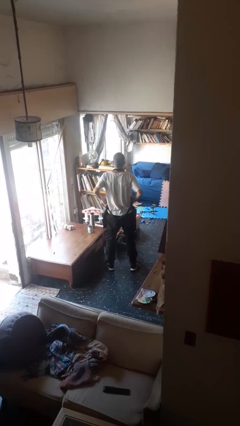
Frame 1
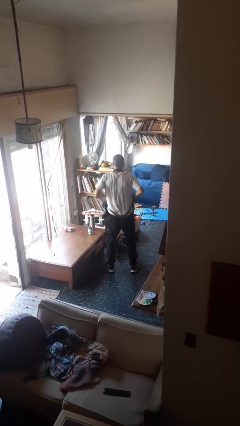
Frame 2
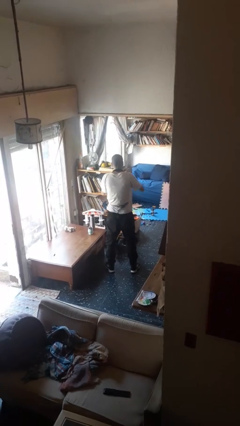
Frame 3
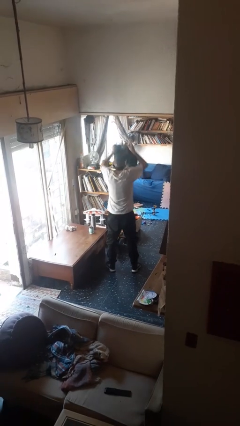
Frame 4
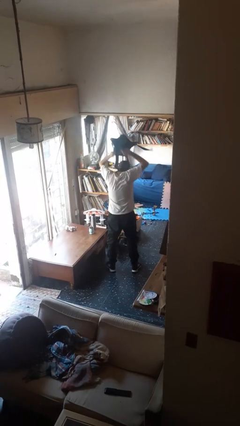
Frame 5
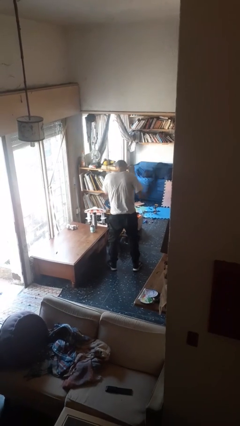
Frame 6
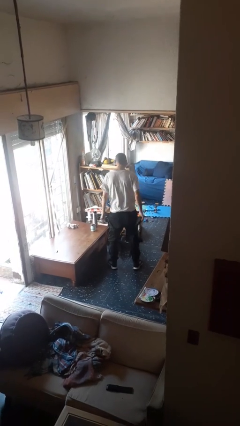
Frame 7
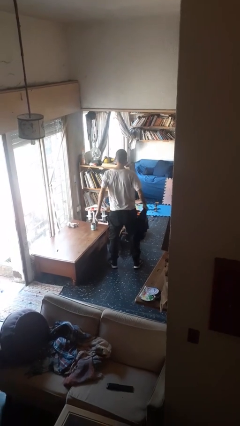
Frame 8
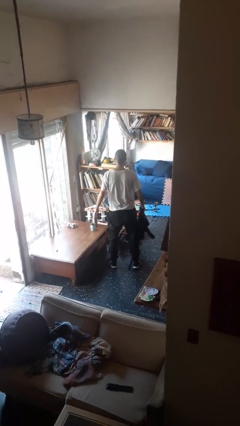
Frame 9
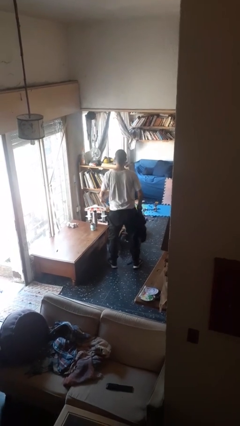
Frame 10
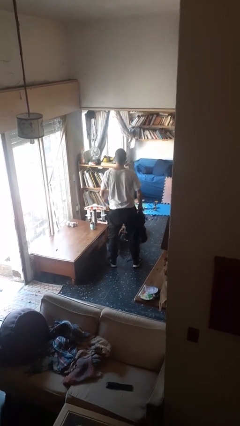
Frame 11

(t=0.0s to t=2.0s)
person takes off apron

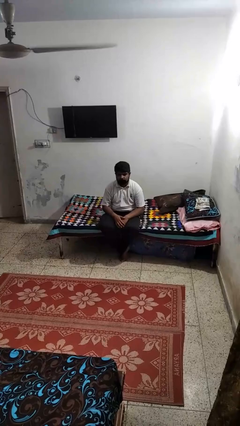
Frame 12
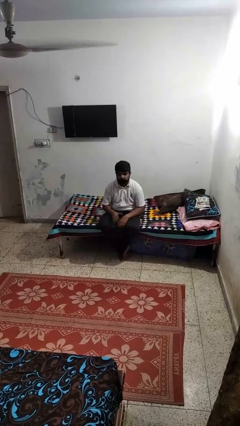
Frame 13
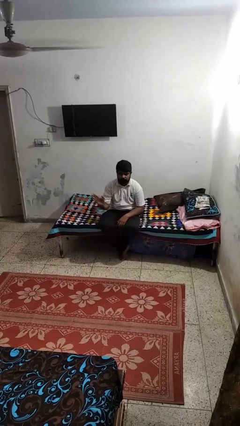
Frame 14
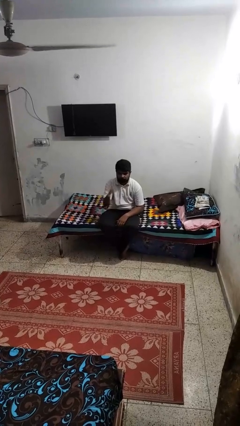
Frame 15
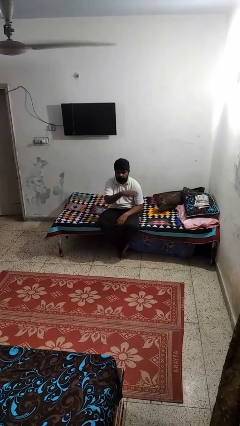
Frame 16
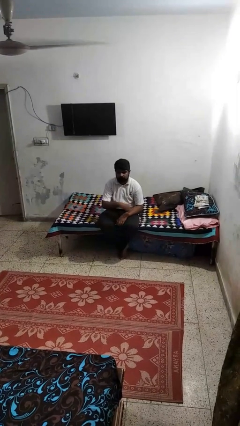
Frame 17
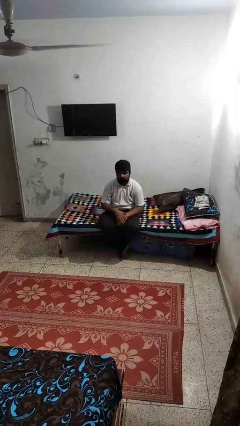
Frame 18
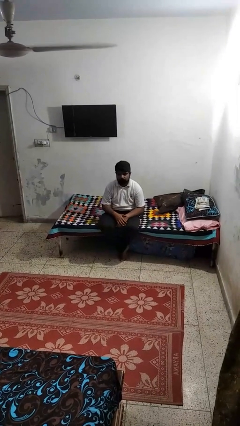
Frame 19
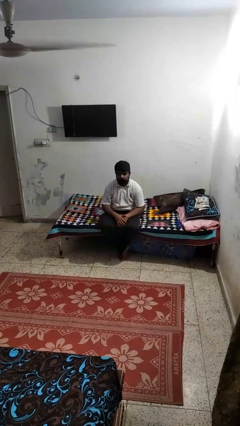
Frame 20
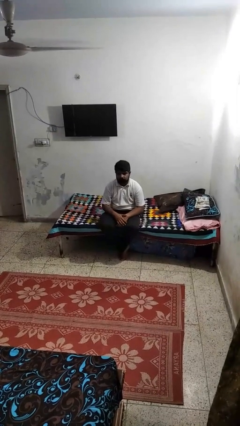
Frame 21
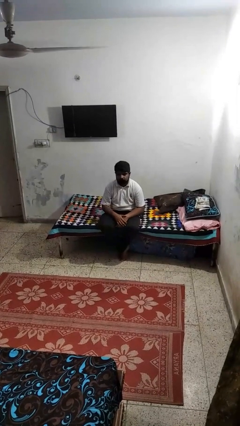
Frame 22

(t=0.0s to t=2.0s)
person gestures swipe left

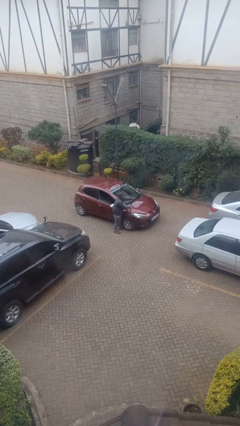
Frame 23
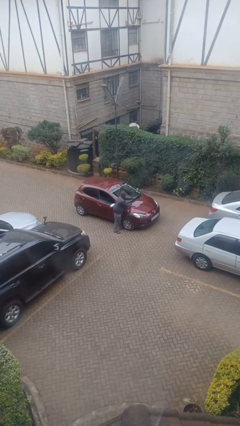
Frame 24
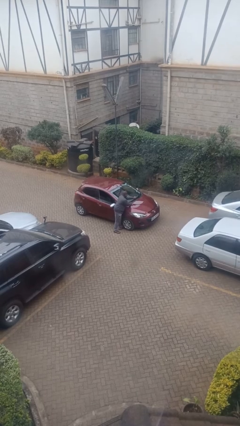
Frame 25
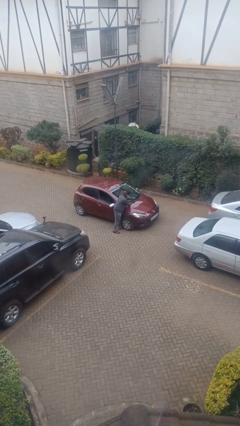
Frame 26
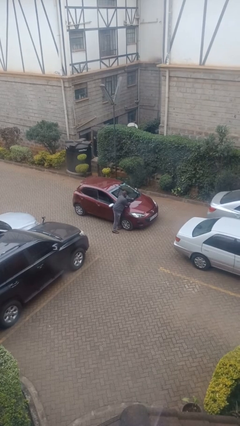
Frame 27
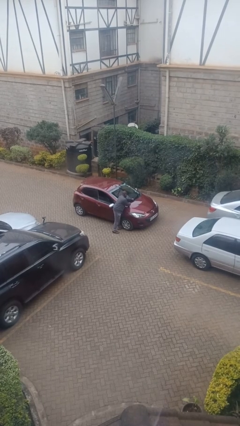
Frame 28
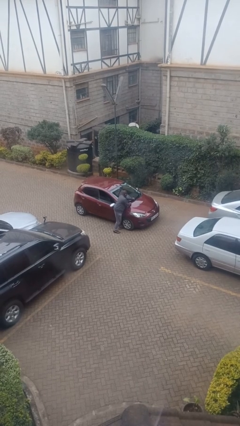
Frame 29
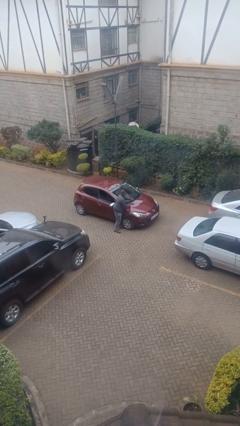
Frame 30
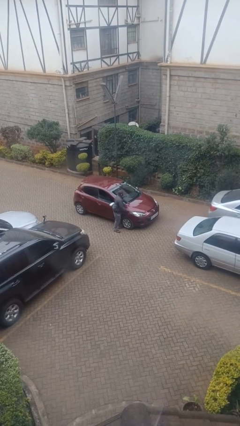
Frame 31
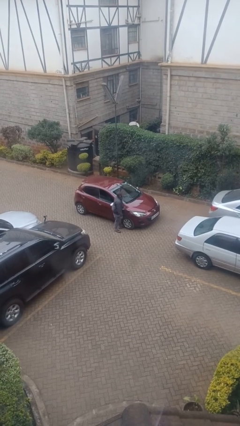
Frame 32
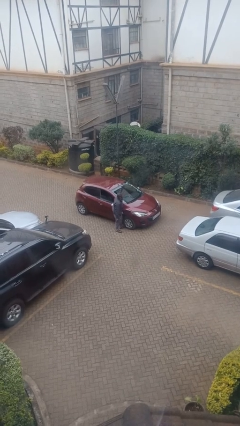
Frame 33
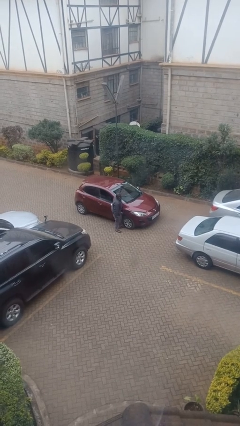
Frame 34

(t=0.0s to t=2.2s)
person flips down car wipers

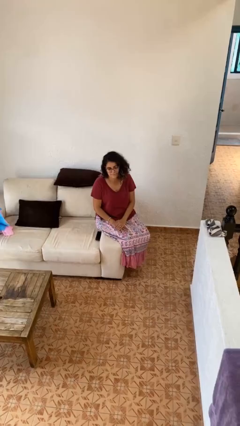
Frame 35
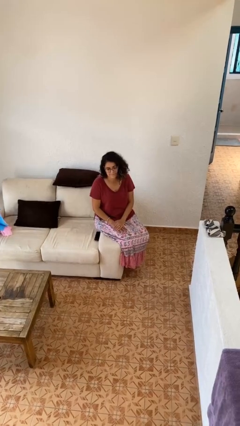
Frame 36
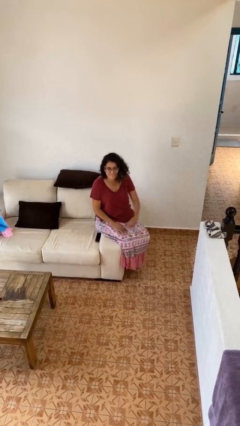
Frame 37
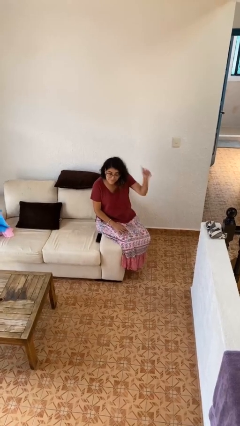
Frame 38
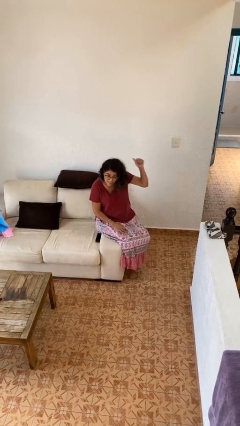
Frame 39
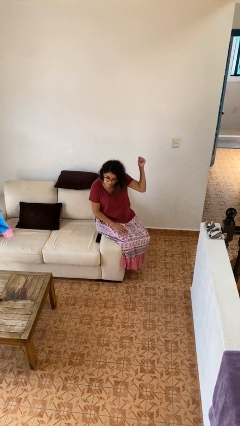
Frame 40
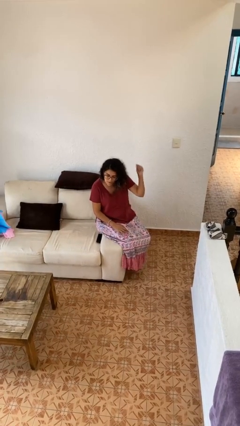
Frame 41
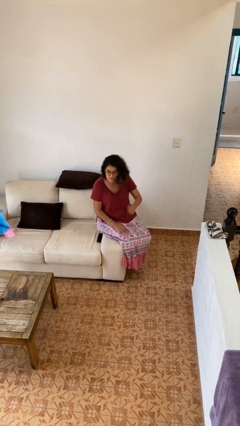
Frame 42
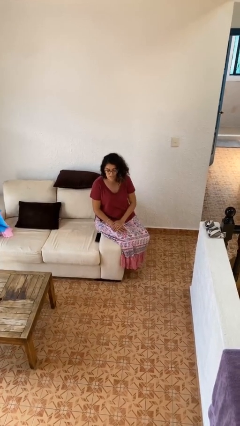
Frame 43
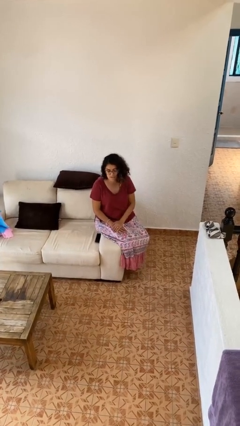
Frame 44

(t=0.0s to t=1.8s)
person gestures behind me

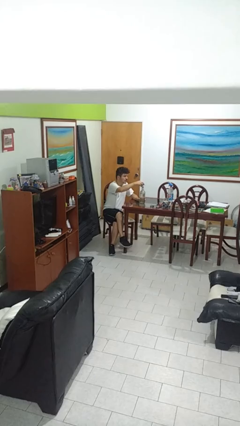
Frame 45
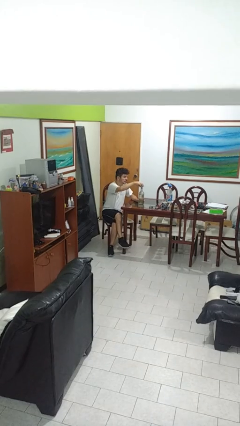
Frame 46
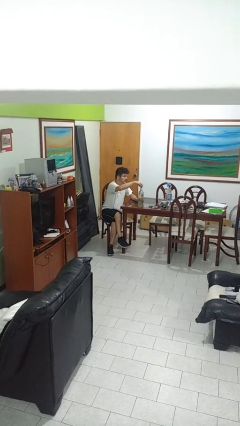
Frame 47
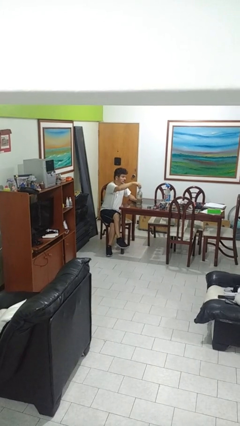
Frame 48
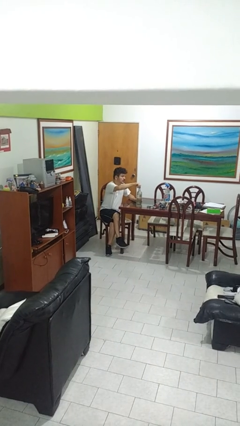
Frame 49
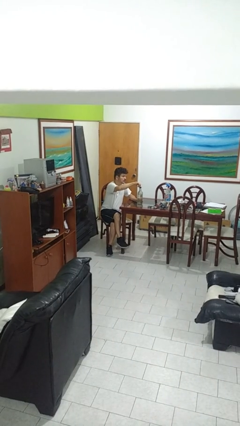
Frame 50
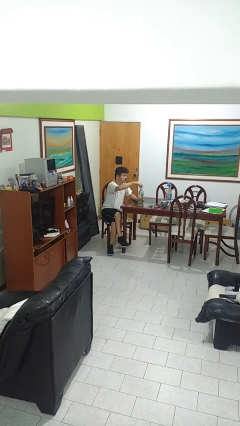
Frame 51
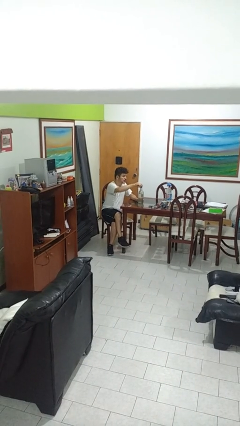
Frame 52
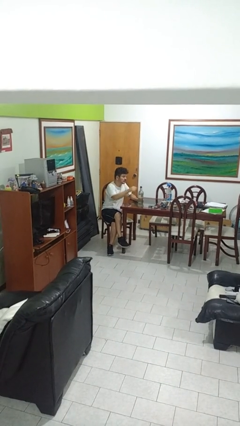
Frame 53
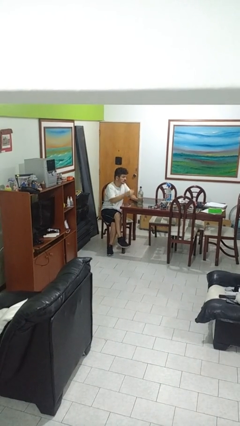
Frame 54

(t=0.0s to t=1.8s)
person screws lid to bottle

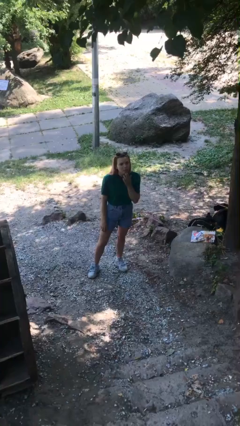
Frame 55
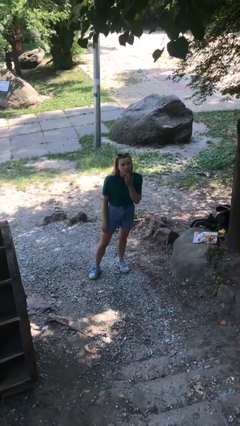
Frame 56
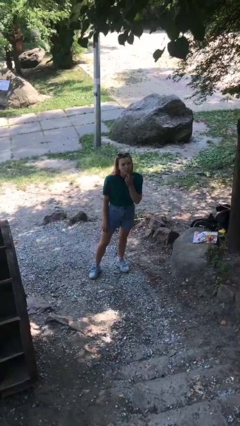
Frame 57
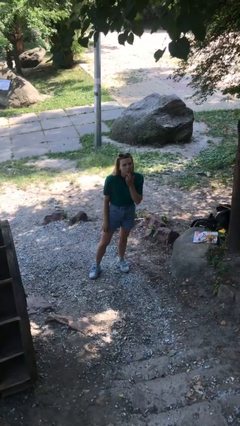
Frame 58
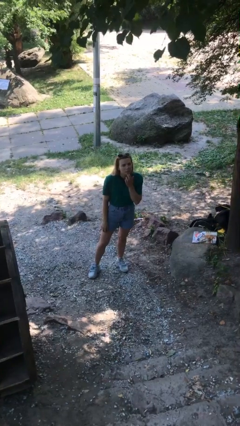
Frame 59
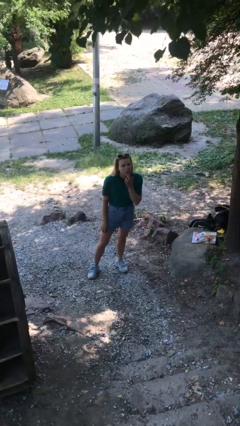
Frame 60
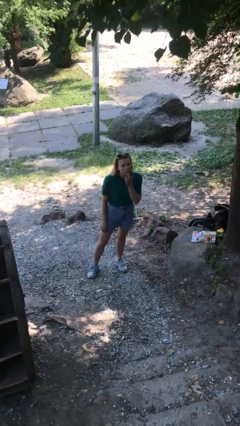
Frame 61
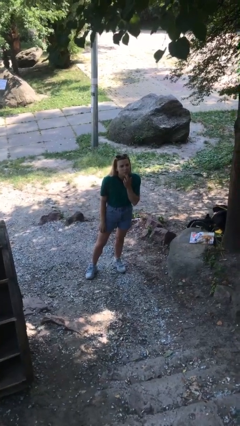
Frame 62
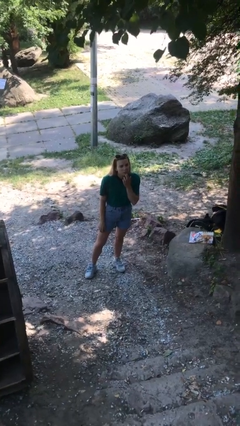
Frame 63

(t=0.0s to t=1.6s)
person scratches face

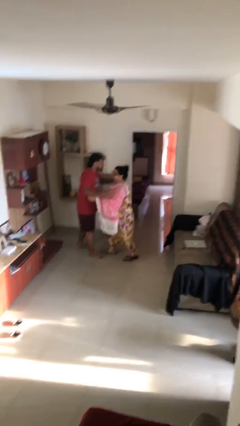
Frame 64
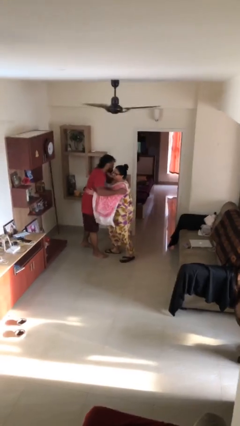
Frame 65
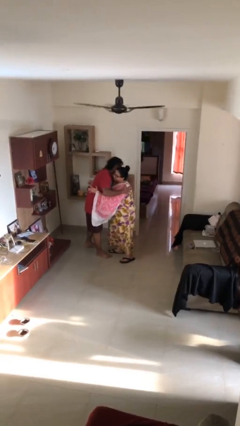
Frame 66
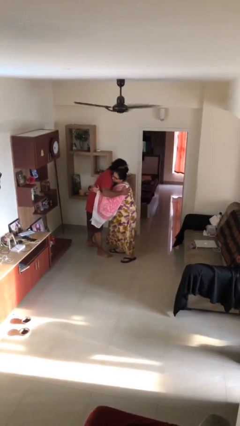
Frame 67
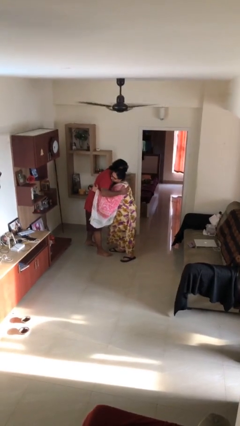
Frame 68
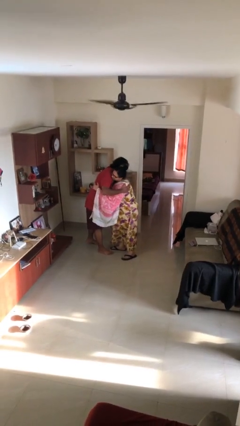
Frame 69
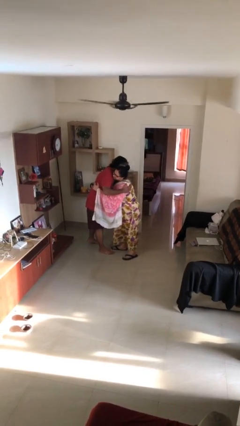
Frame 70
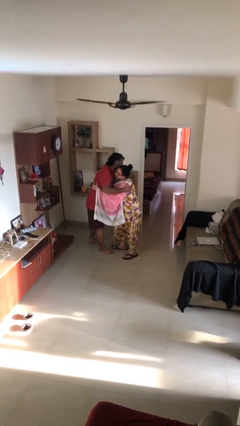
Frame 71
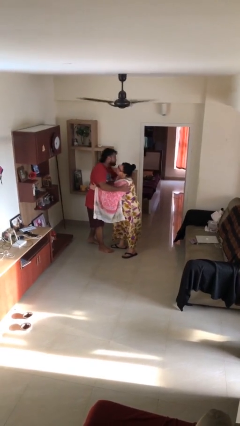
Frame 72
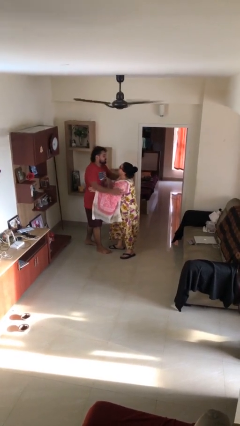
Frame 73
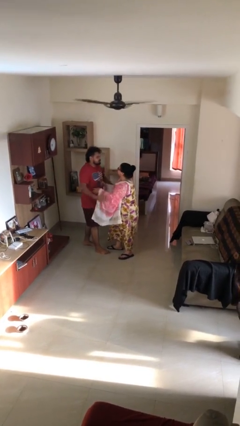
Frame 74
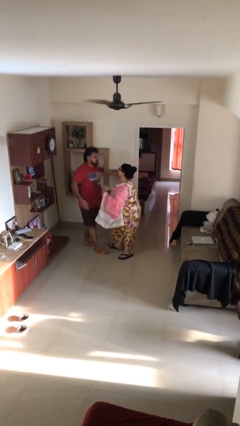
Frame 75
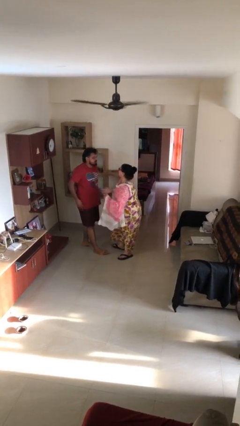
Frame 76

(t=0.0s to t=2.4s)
person embraces person

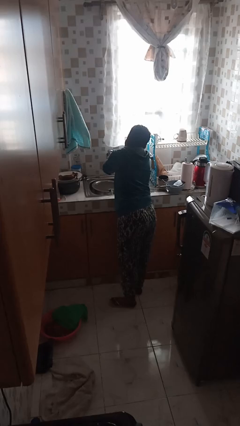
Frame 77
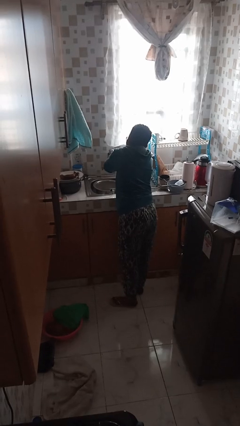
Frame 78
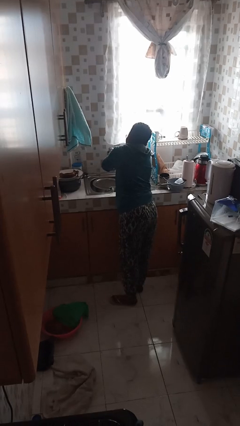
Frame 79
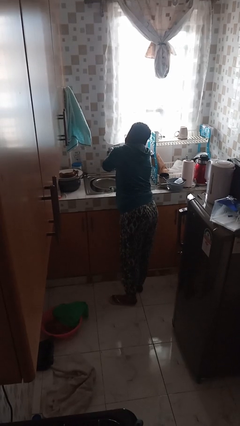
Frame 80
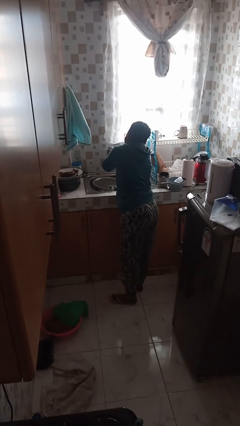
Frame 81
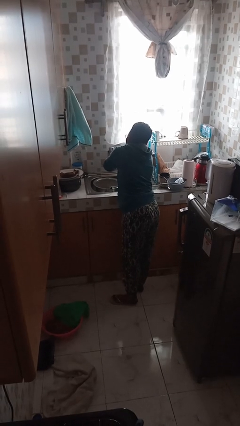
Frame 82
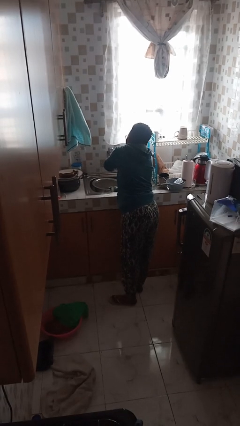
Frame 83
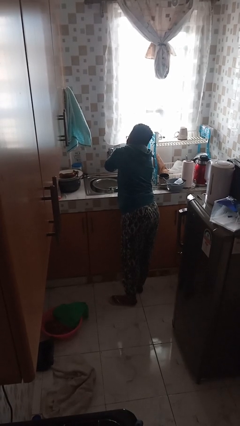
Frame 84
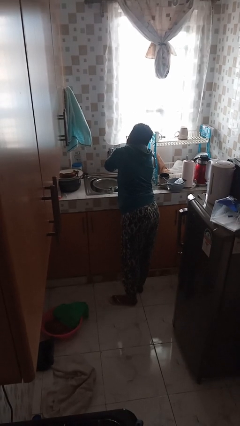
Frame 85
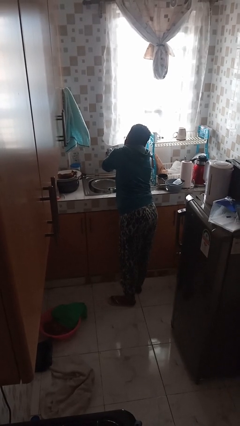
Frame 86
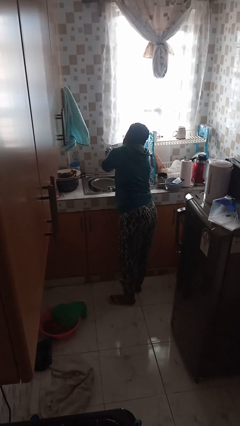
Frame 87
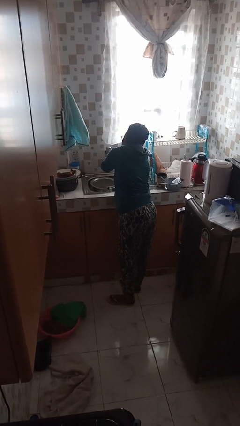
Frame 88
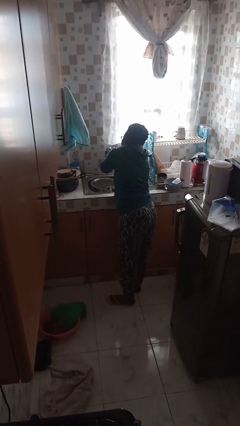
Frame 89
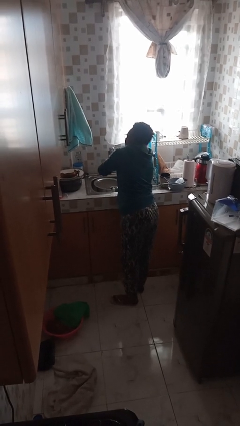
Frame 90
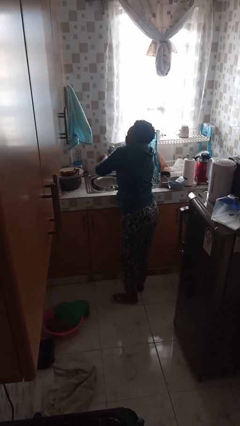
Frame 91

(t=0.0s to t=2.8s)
person washes hands

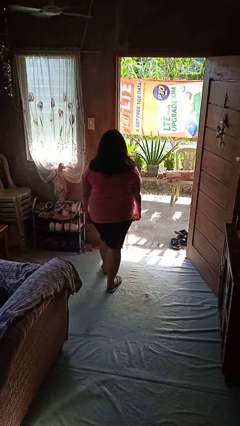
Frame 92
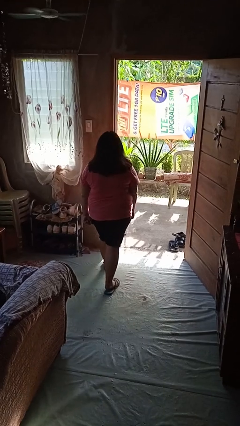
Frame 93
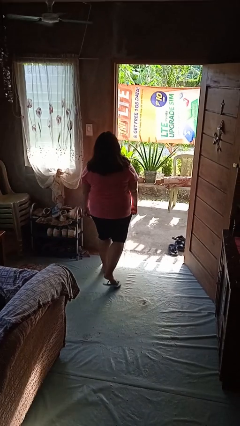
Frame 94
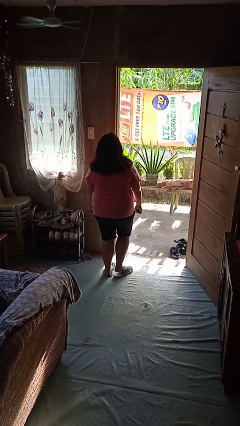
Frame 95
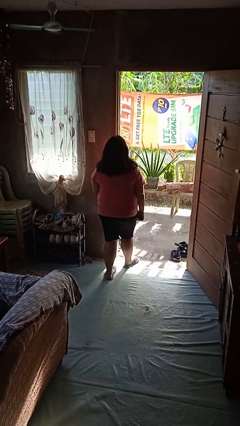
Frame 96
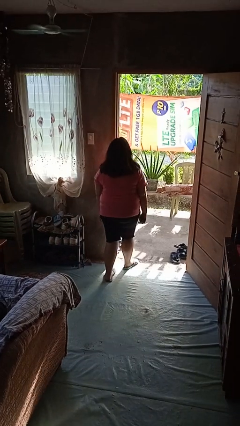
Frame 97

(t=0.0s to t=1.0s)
person bumps into wall
